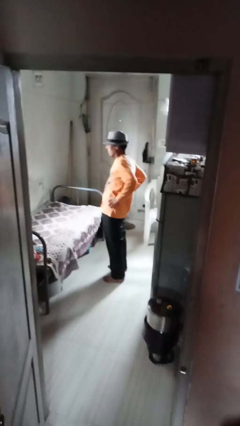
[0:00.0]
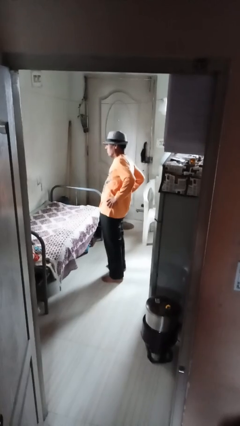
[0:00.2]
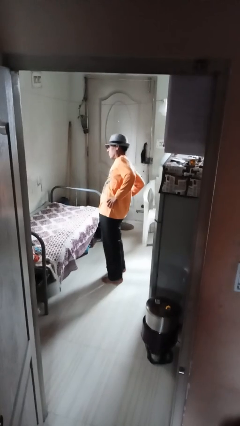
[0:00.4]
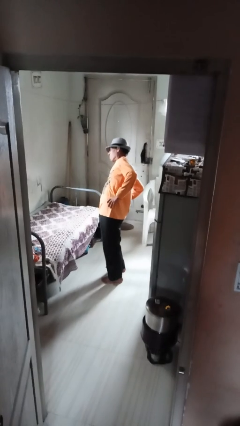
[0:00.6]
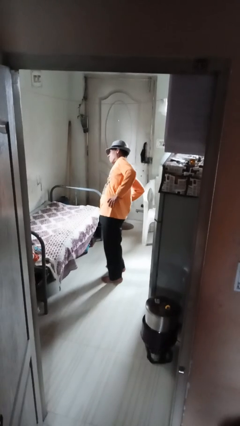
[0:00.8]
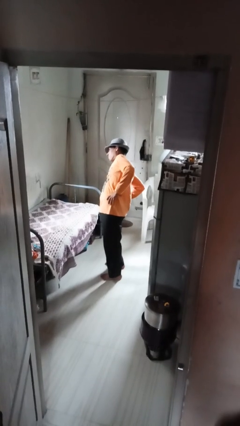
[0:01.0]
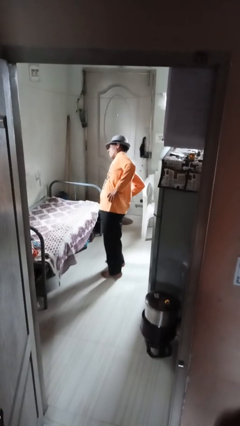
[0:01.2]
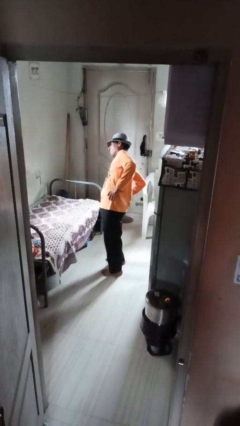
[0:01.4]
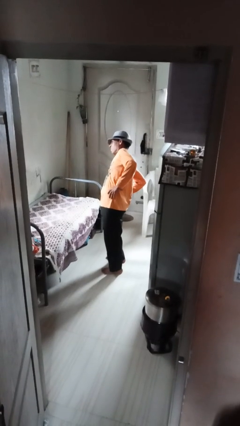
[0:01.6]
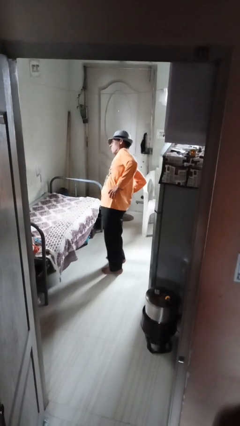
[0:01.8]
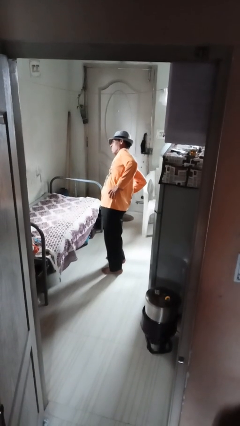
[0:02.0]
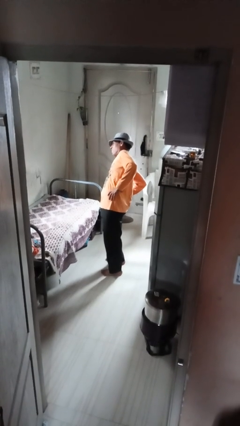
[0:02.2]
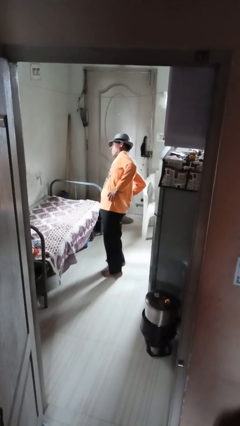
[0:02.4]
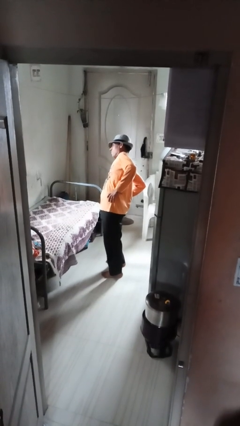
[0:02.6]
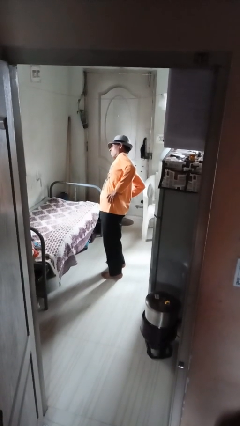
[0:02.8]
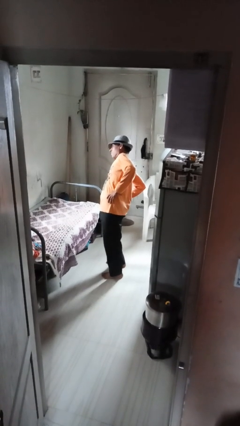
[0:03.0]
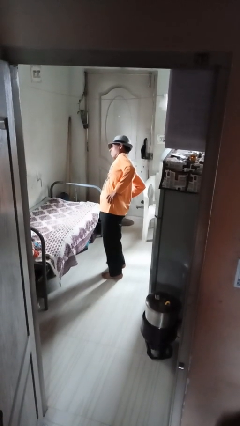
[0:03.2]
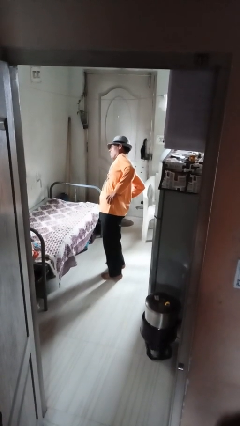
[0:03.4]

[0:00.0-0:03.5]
person stretches arms to side

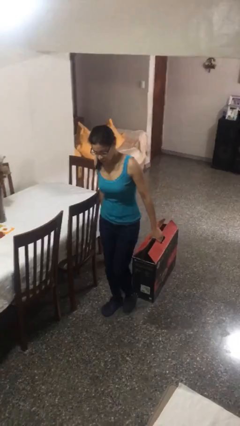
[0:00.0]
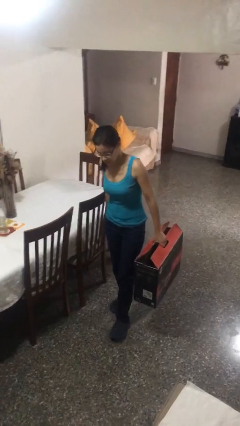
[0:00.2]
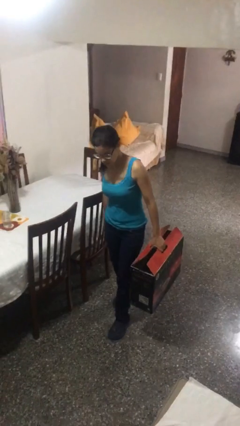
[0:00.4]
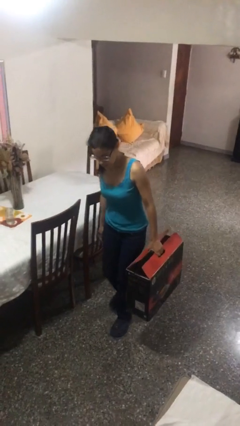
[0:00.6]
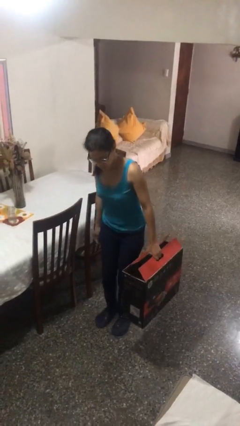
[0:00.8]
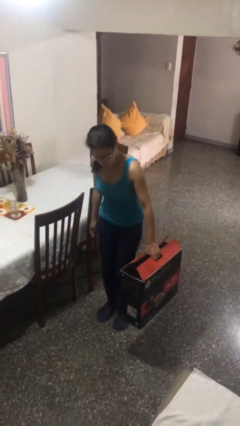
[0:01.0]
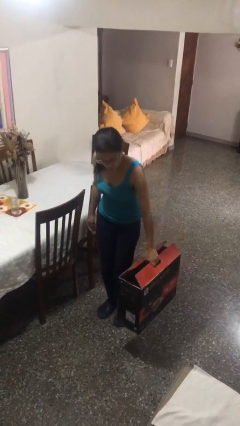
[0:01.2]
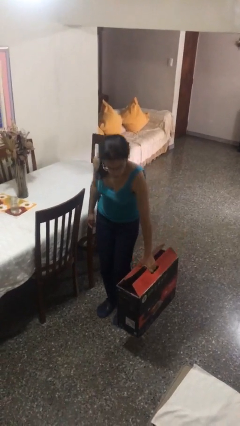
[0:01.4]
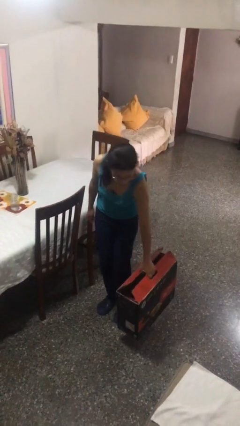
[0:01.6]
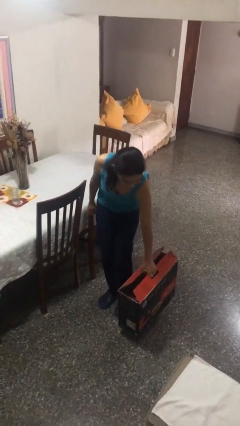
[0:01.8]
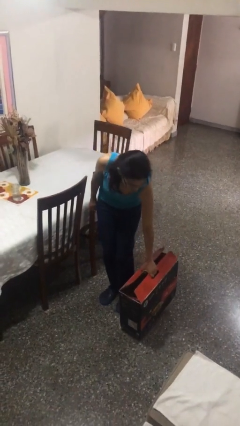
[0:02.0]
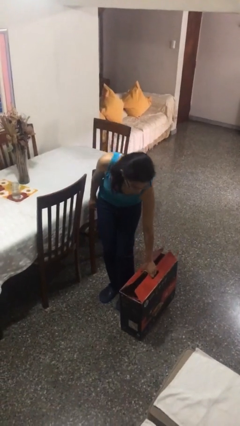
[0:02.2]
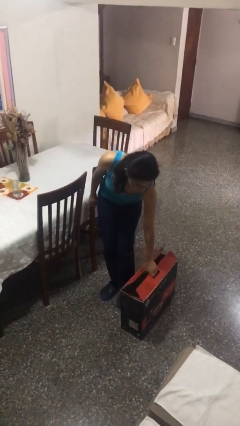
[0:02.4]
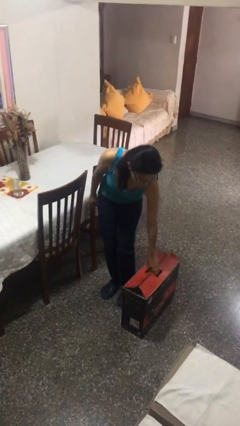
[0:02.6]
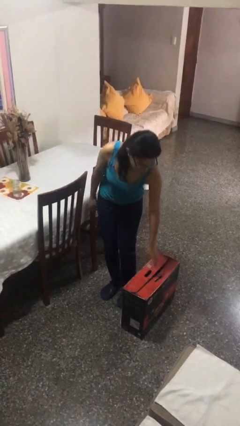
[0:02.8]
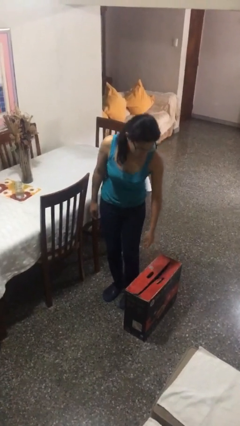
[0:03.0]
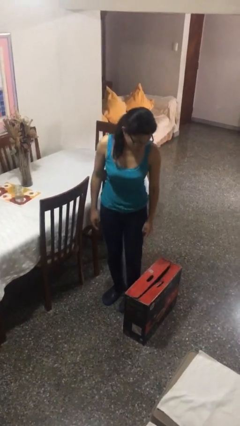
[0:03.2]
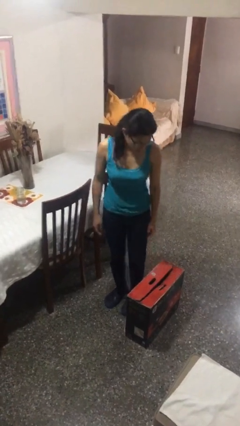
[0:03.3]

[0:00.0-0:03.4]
person puts down object on floor

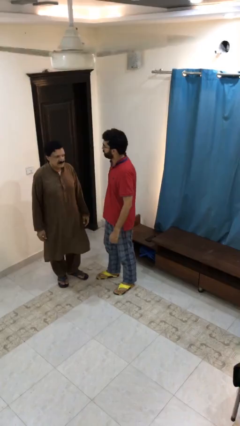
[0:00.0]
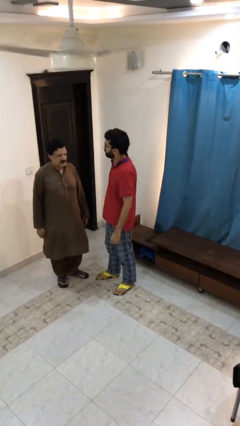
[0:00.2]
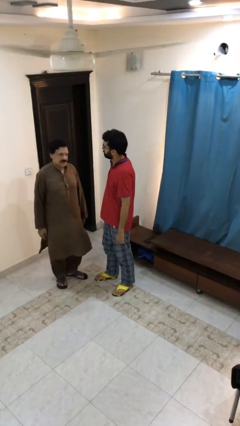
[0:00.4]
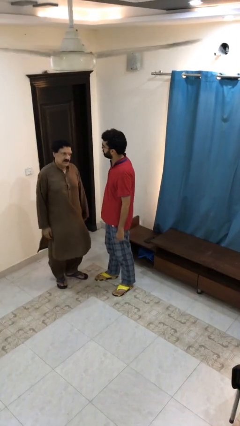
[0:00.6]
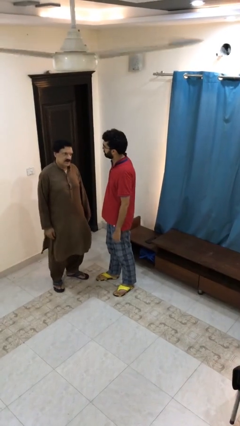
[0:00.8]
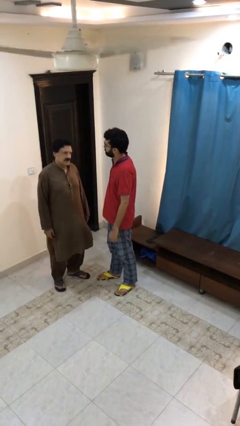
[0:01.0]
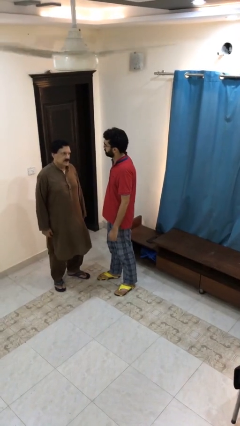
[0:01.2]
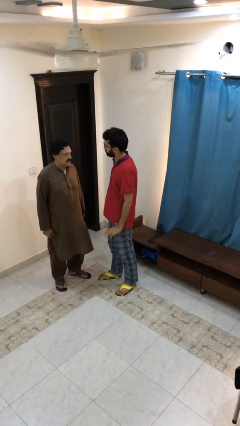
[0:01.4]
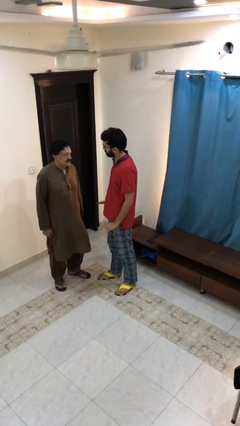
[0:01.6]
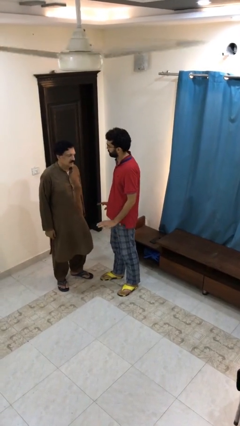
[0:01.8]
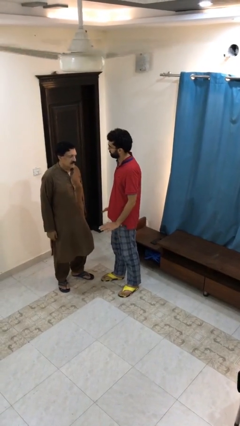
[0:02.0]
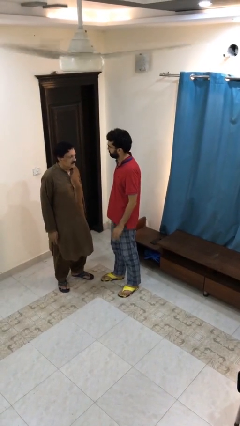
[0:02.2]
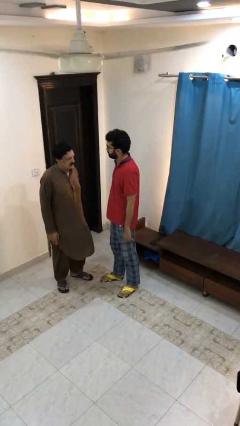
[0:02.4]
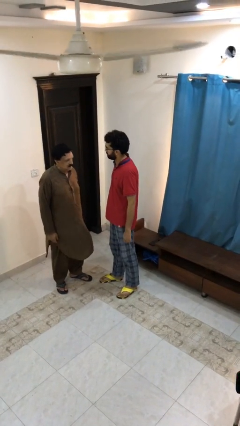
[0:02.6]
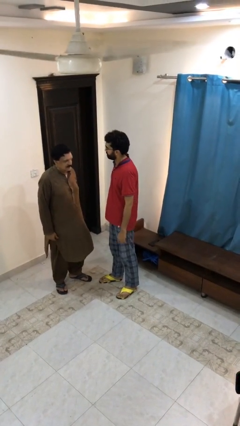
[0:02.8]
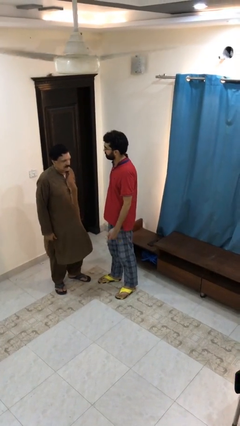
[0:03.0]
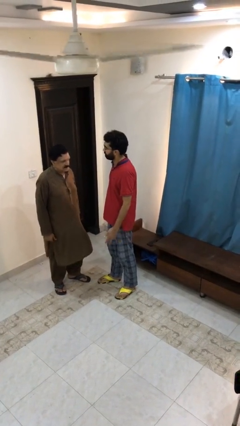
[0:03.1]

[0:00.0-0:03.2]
person talks to person

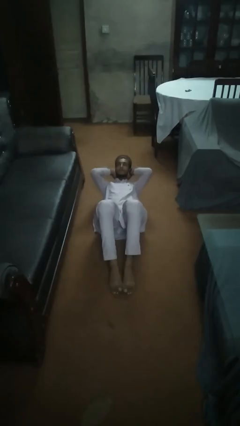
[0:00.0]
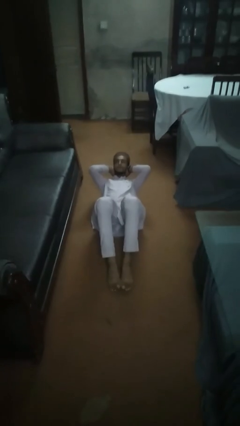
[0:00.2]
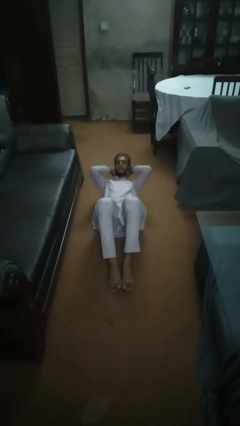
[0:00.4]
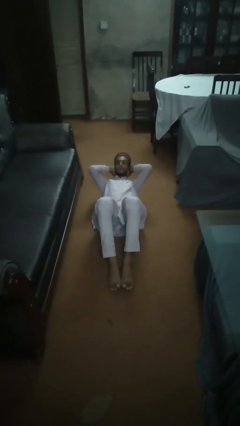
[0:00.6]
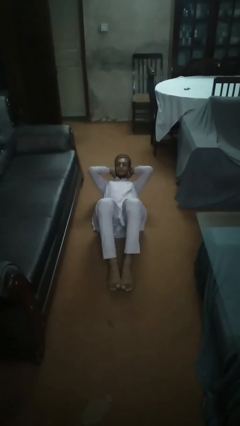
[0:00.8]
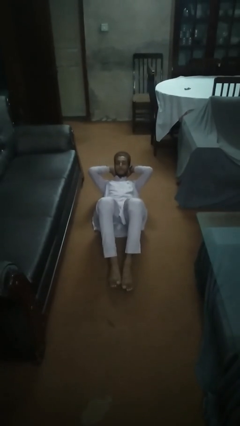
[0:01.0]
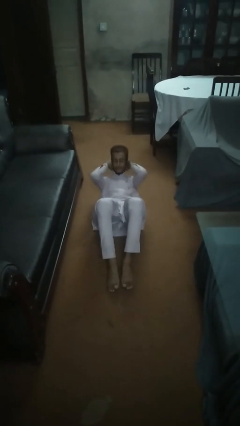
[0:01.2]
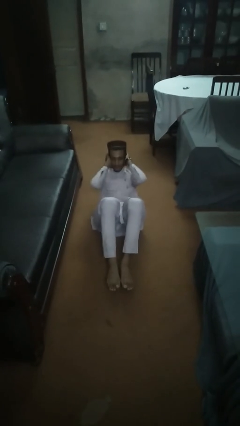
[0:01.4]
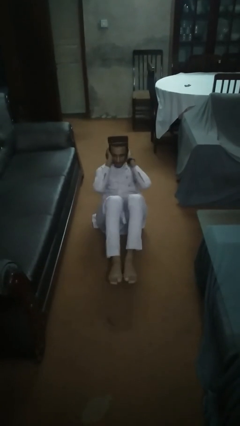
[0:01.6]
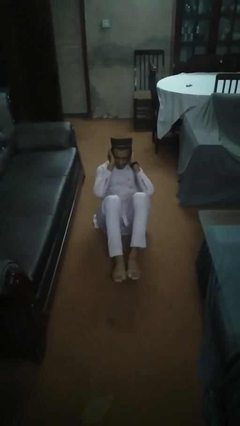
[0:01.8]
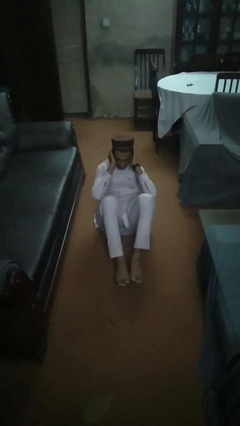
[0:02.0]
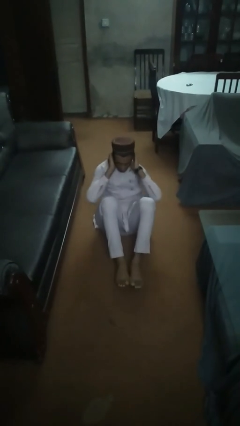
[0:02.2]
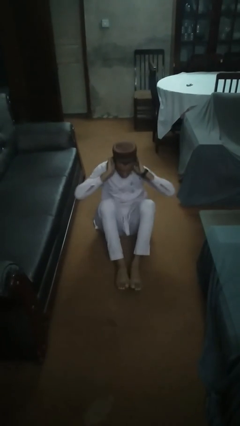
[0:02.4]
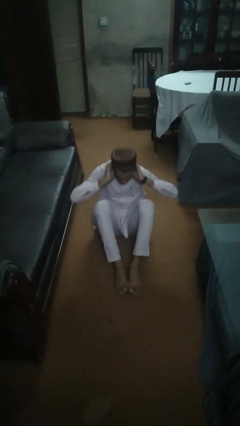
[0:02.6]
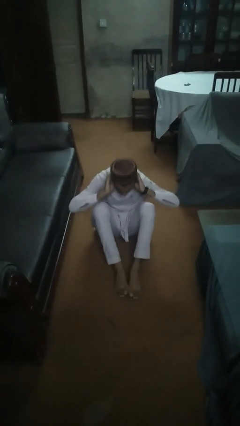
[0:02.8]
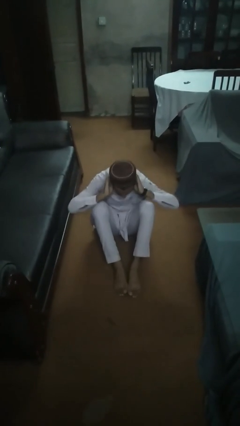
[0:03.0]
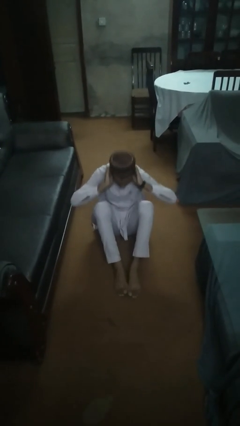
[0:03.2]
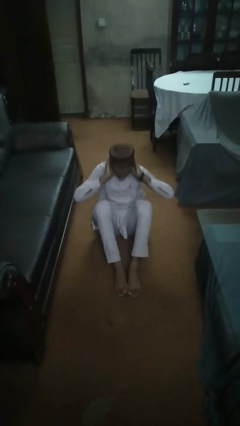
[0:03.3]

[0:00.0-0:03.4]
person exercises with situp

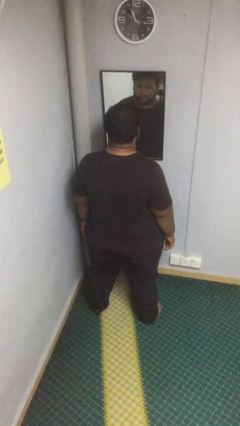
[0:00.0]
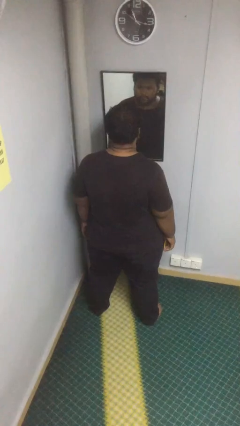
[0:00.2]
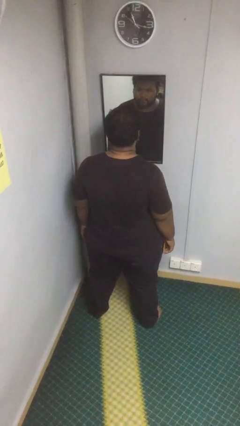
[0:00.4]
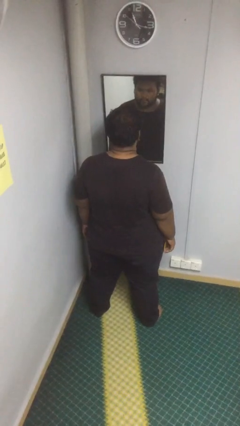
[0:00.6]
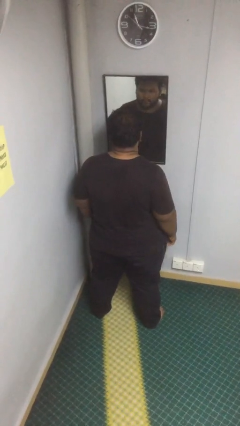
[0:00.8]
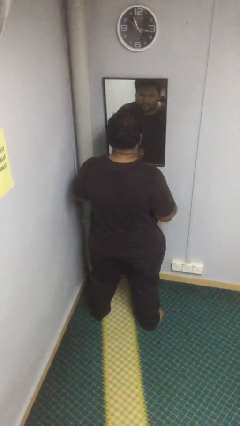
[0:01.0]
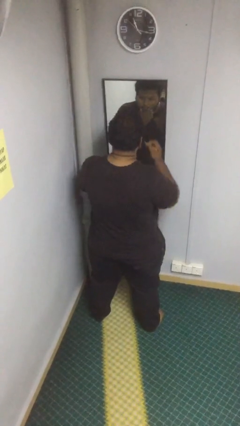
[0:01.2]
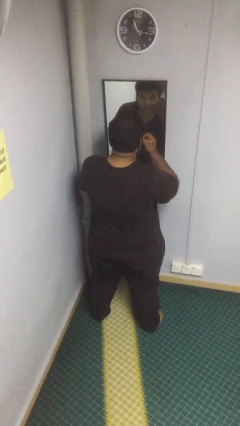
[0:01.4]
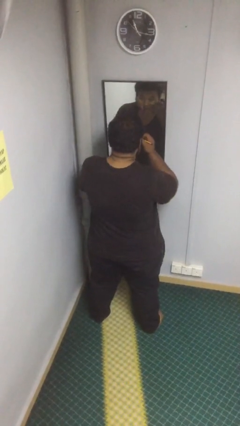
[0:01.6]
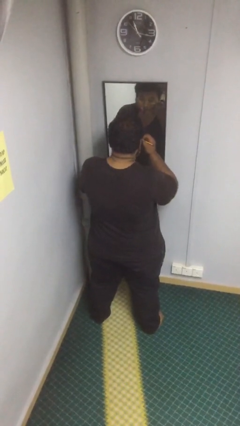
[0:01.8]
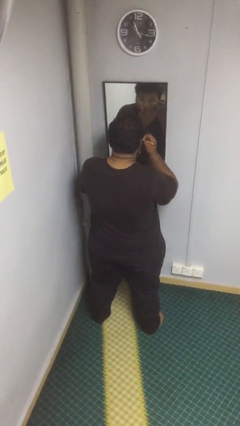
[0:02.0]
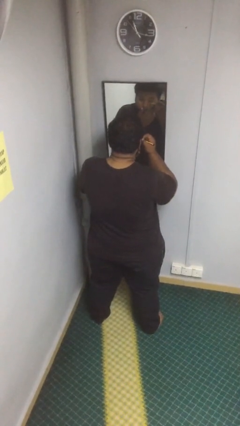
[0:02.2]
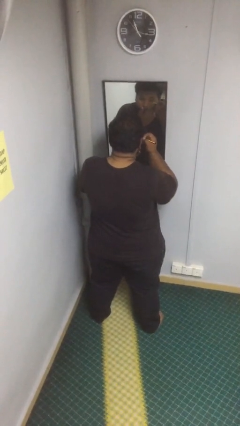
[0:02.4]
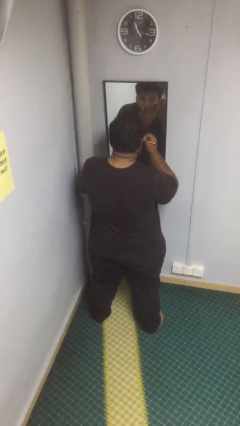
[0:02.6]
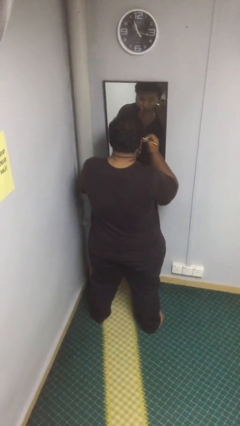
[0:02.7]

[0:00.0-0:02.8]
person applies eye makeup

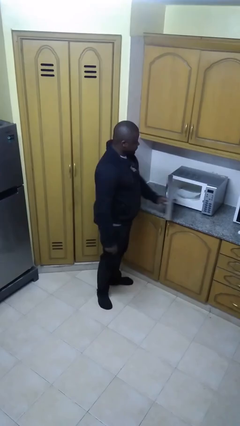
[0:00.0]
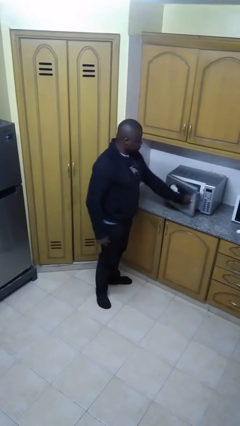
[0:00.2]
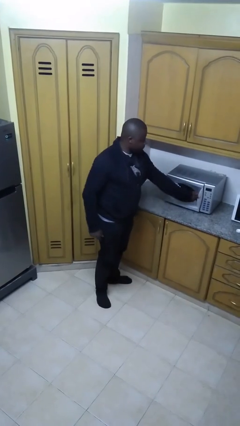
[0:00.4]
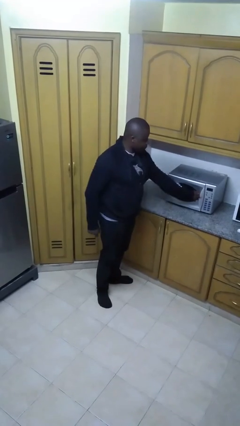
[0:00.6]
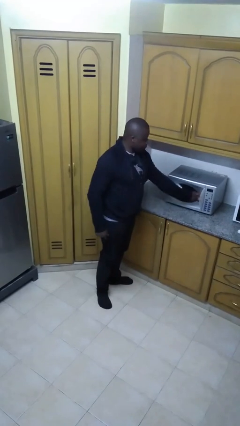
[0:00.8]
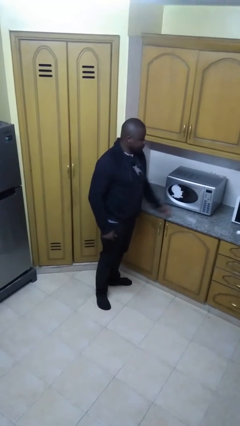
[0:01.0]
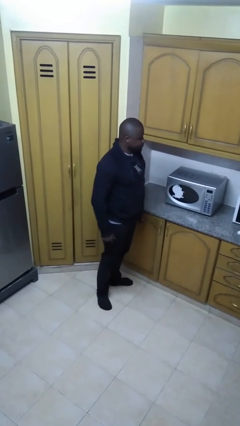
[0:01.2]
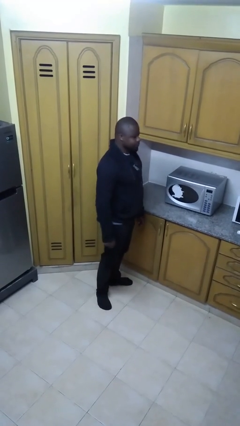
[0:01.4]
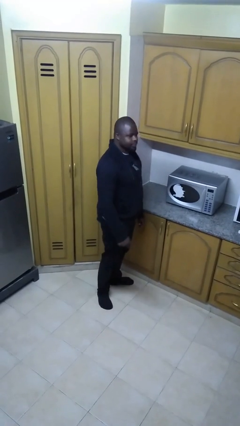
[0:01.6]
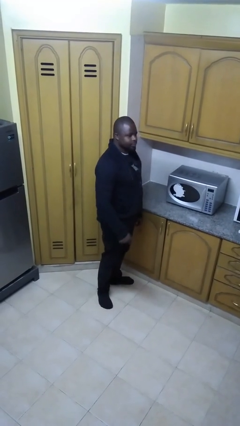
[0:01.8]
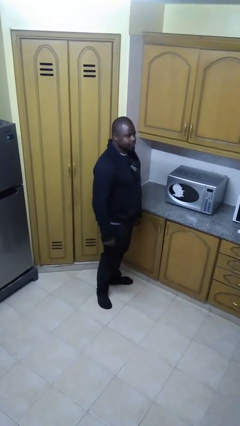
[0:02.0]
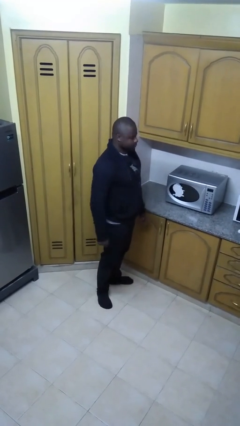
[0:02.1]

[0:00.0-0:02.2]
person closes microwave
